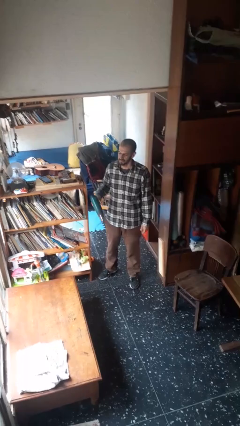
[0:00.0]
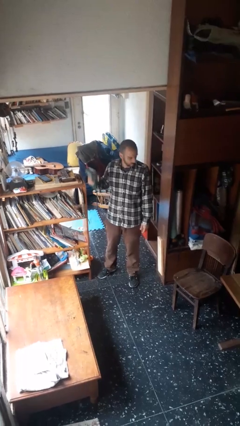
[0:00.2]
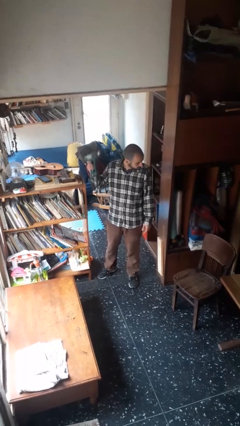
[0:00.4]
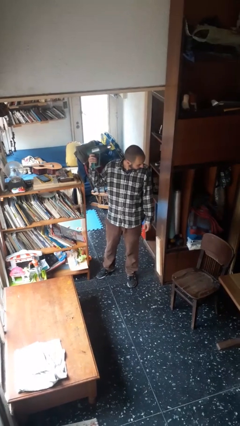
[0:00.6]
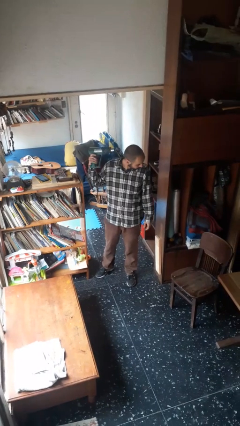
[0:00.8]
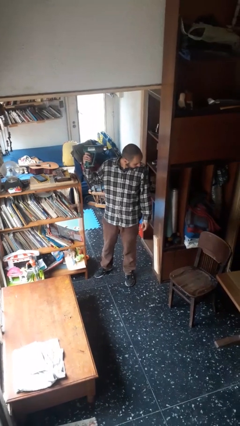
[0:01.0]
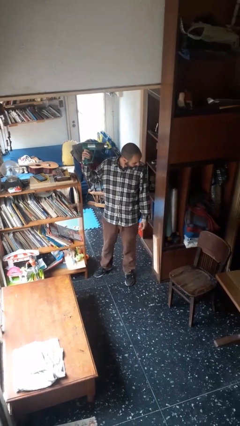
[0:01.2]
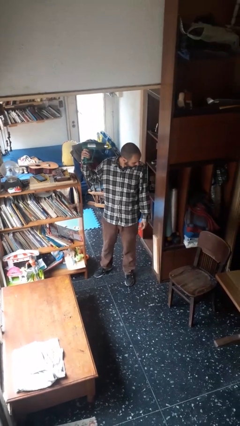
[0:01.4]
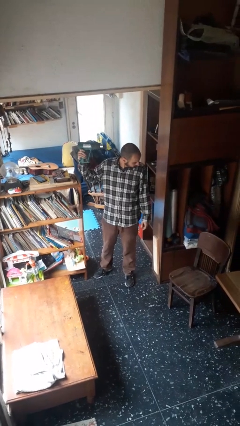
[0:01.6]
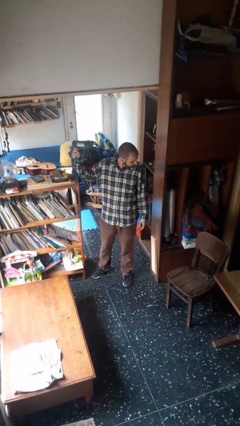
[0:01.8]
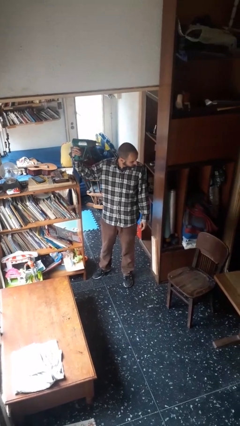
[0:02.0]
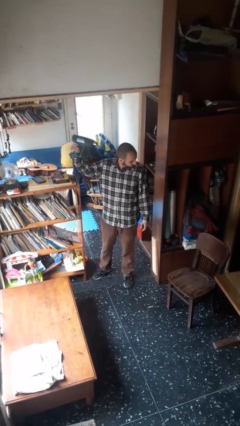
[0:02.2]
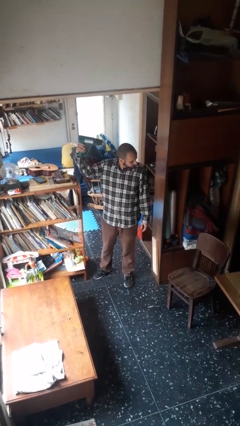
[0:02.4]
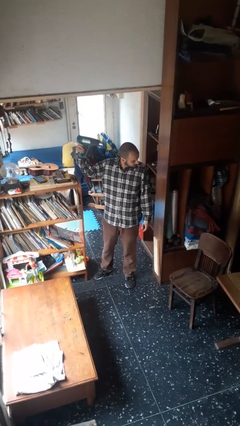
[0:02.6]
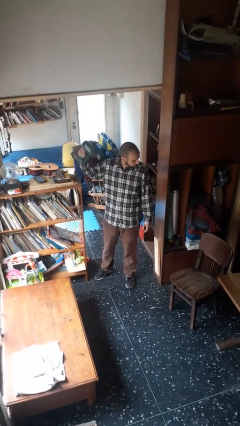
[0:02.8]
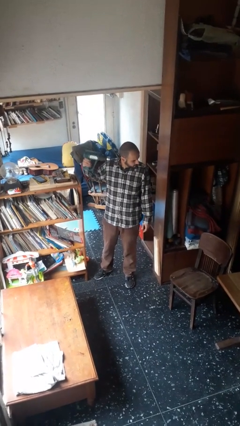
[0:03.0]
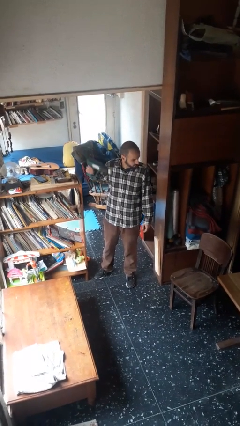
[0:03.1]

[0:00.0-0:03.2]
person dries hair with hairdryer

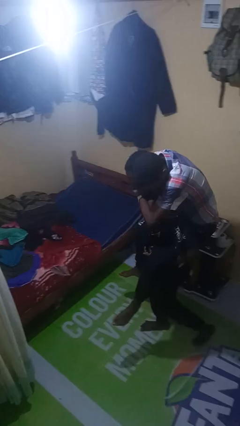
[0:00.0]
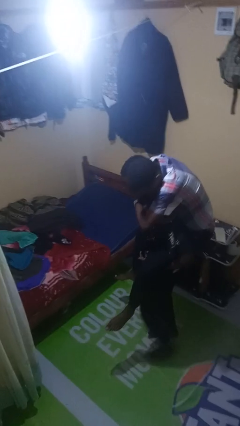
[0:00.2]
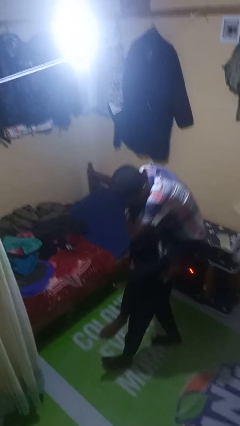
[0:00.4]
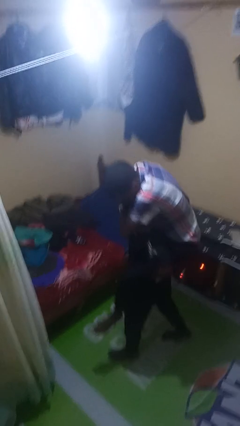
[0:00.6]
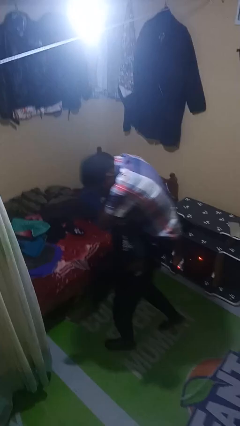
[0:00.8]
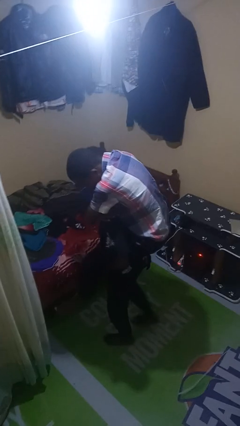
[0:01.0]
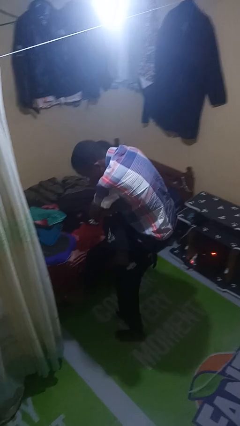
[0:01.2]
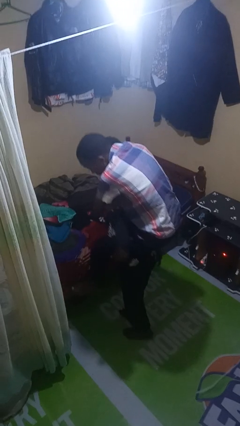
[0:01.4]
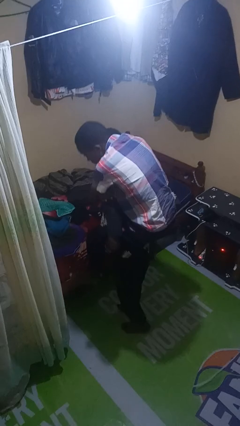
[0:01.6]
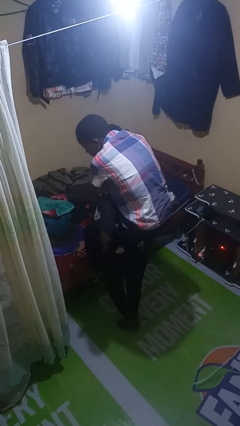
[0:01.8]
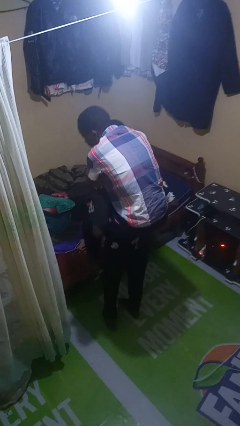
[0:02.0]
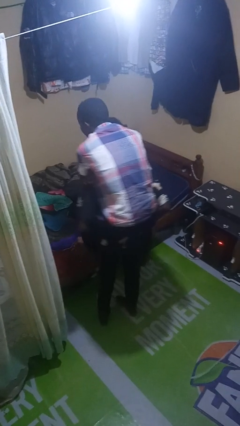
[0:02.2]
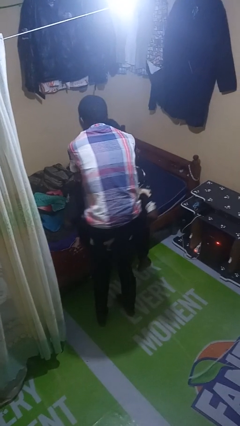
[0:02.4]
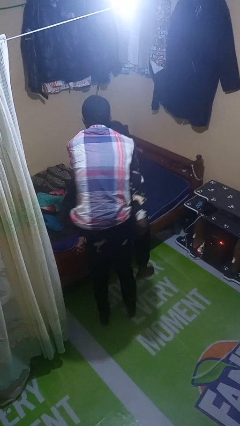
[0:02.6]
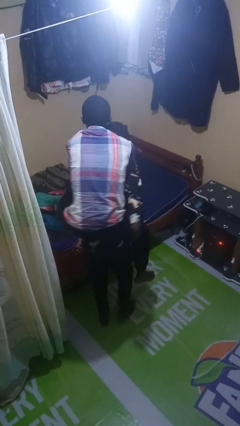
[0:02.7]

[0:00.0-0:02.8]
person carries person on back

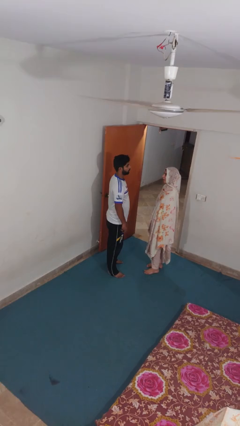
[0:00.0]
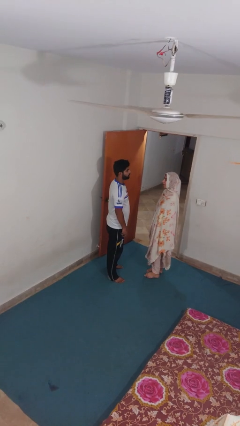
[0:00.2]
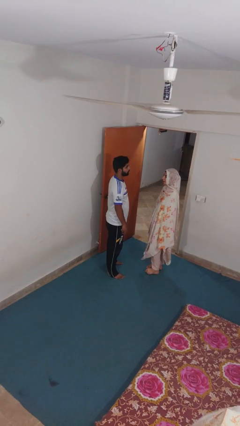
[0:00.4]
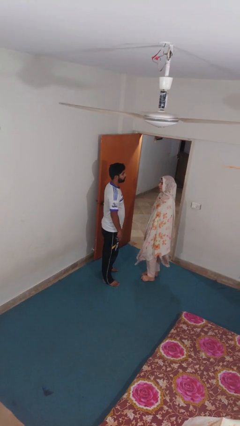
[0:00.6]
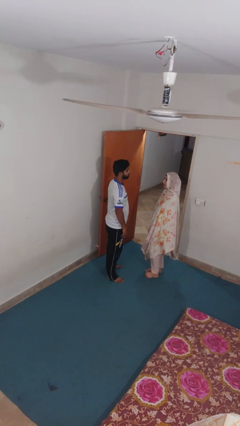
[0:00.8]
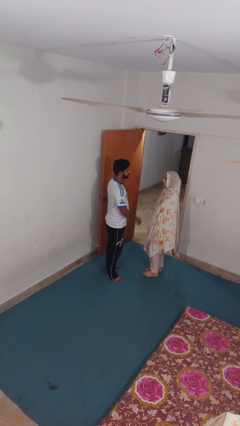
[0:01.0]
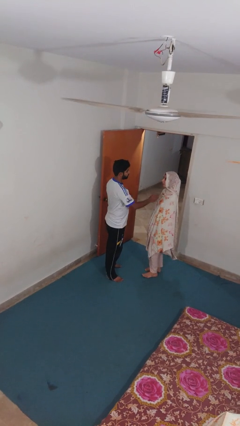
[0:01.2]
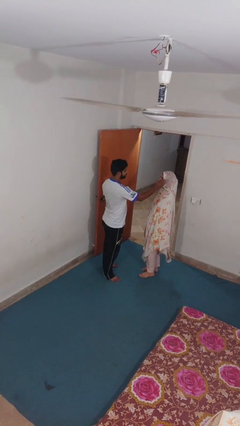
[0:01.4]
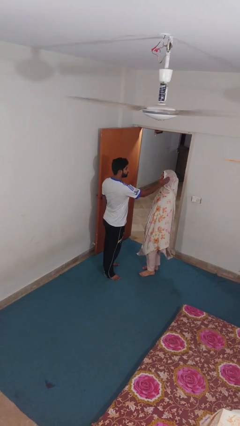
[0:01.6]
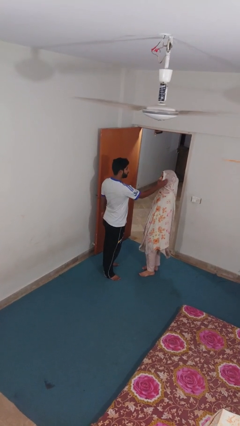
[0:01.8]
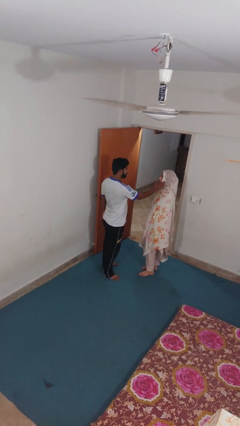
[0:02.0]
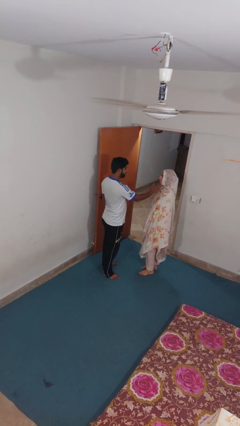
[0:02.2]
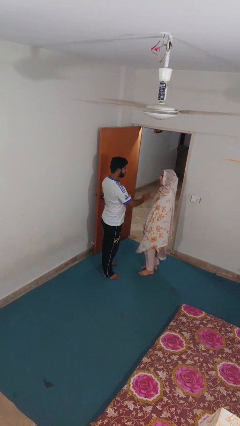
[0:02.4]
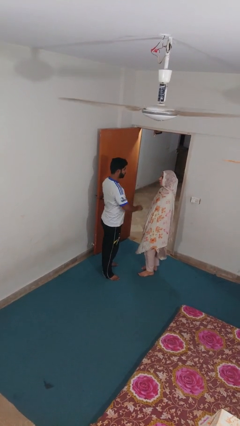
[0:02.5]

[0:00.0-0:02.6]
person touches face of person

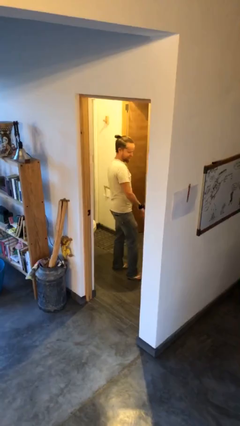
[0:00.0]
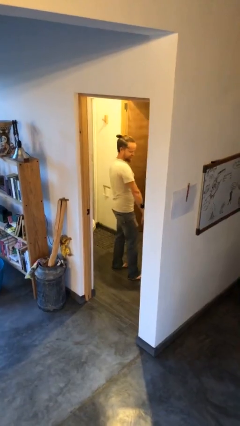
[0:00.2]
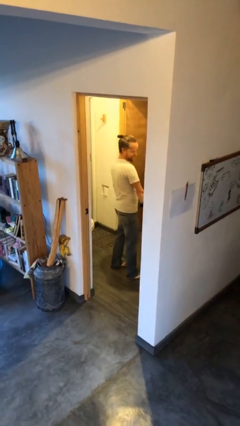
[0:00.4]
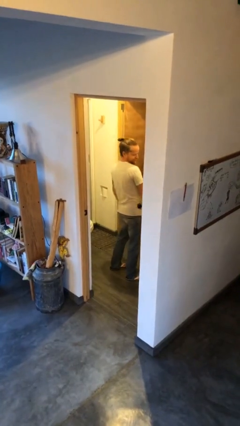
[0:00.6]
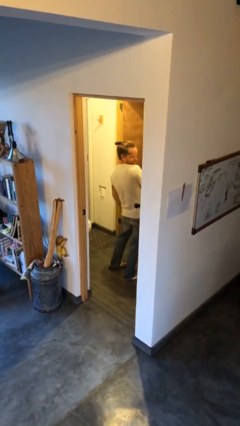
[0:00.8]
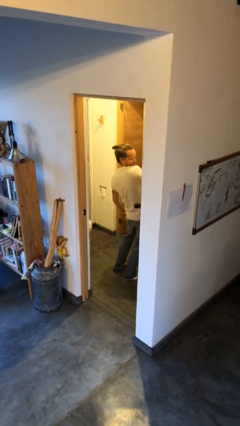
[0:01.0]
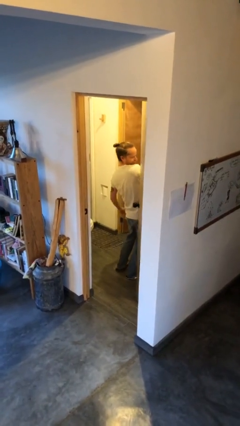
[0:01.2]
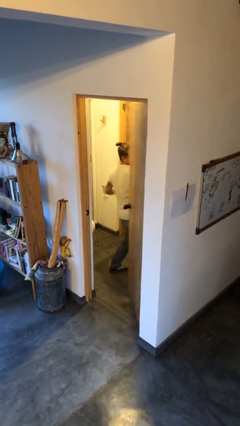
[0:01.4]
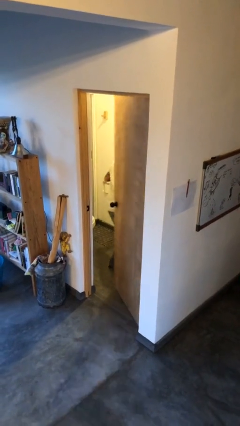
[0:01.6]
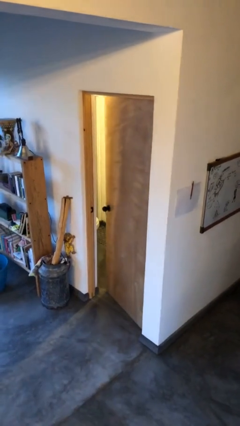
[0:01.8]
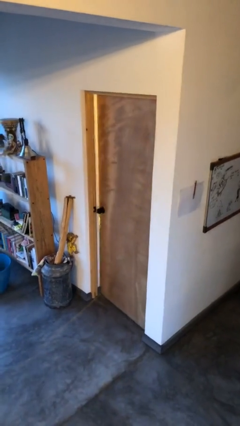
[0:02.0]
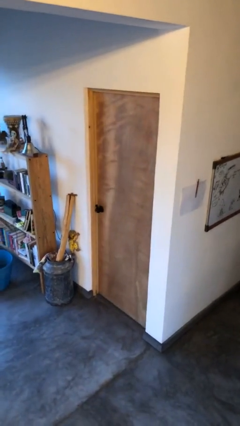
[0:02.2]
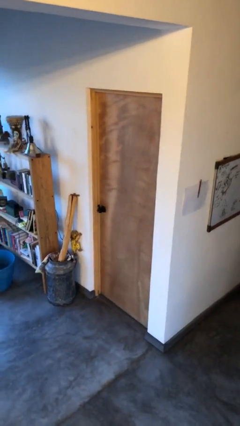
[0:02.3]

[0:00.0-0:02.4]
person closes door with hip

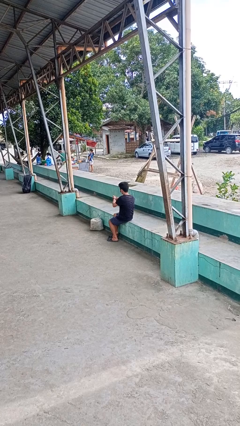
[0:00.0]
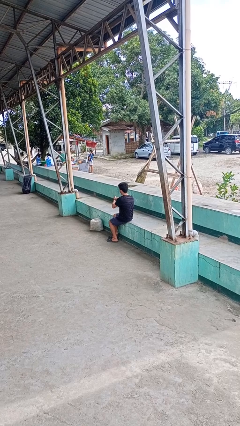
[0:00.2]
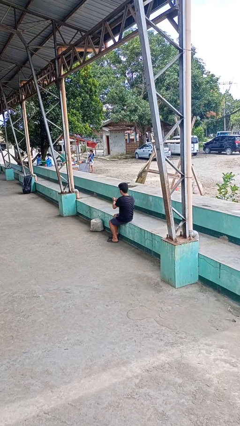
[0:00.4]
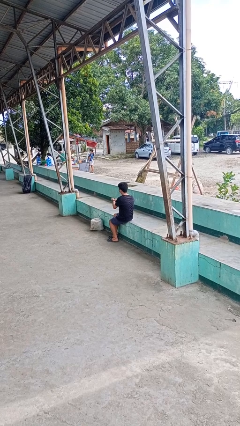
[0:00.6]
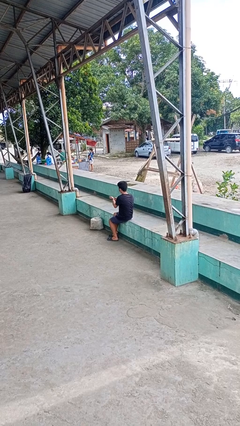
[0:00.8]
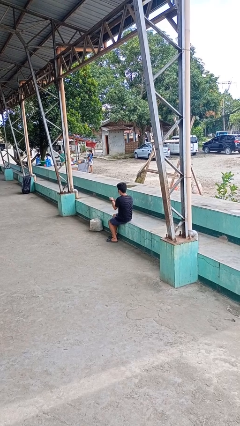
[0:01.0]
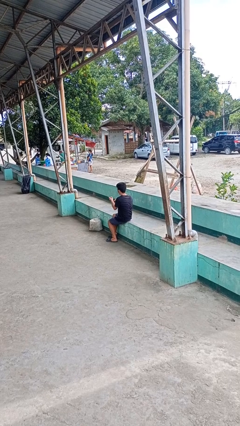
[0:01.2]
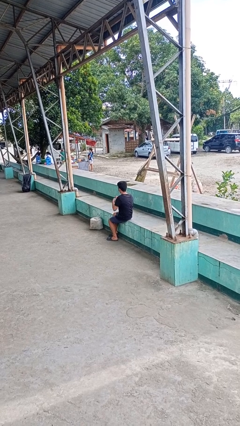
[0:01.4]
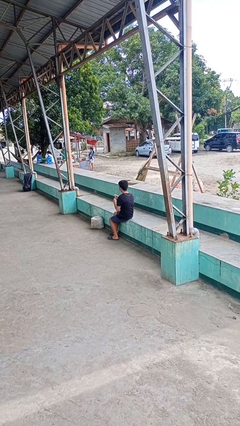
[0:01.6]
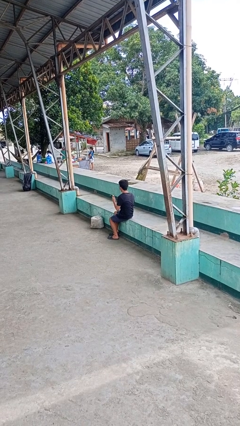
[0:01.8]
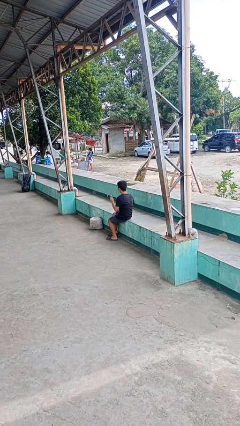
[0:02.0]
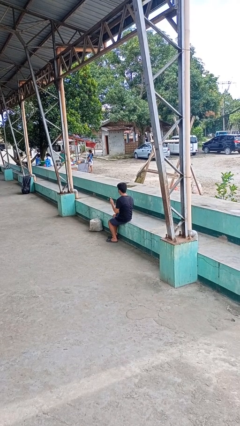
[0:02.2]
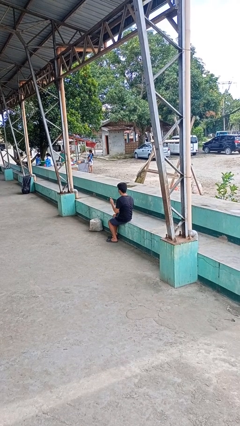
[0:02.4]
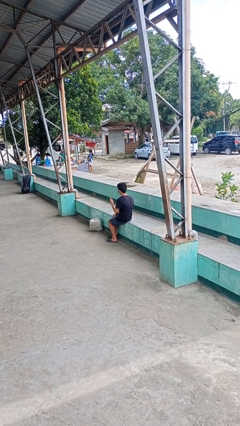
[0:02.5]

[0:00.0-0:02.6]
person takes off wristwatch

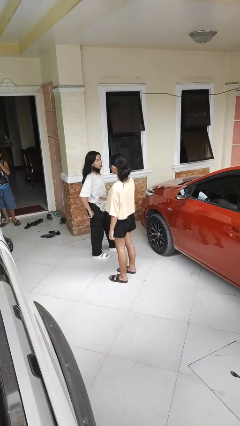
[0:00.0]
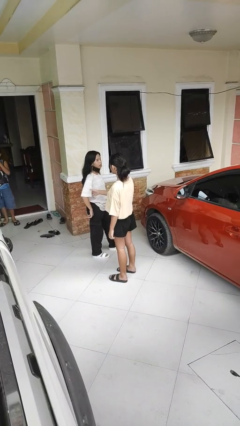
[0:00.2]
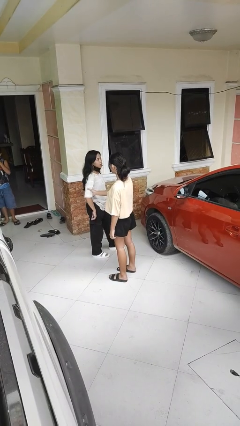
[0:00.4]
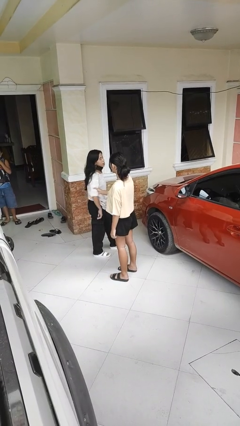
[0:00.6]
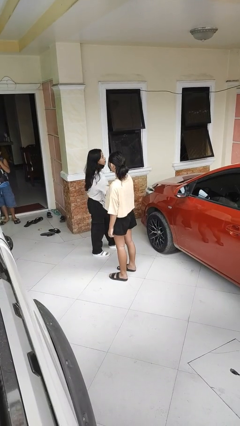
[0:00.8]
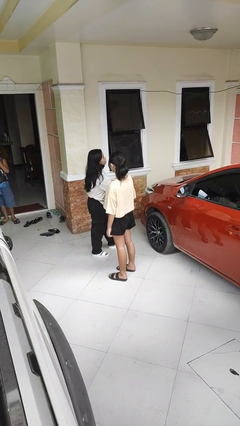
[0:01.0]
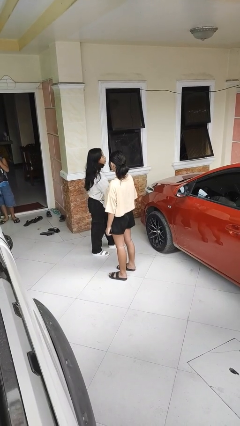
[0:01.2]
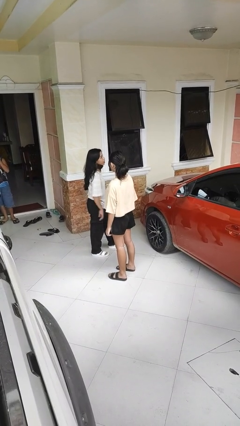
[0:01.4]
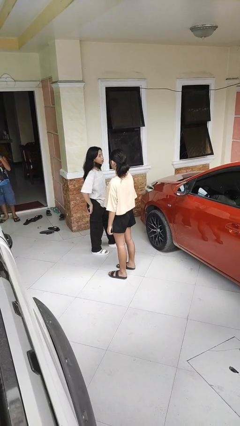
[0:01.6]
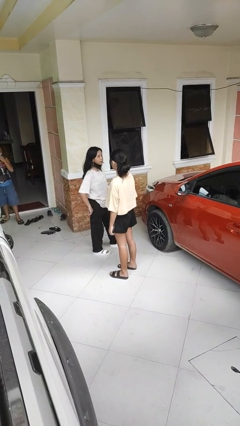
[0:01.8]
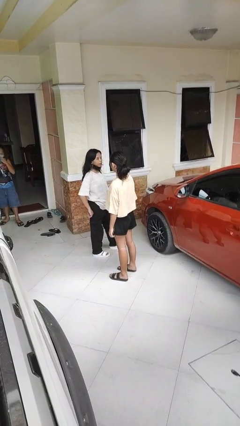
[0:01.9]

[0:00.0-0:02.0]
person grabs person by bicep

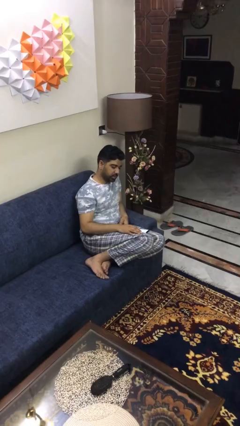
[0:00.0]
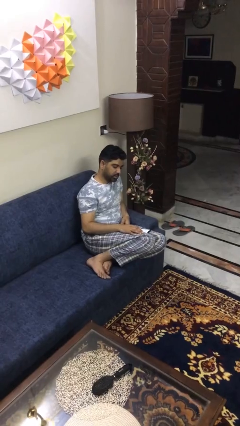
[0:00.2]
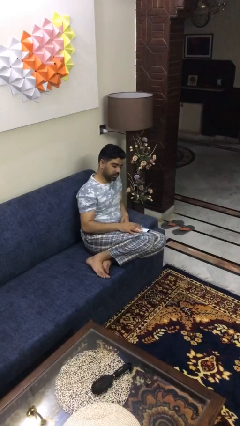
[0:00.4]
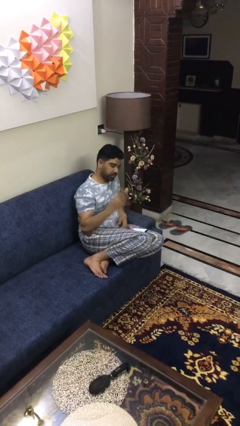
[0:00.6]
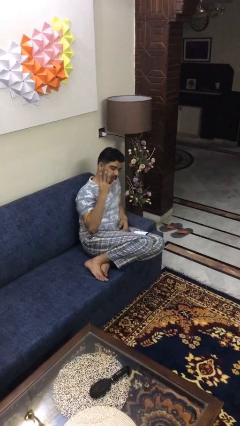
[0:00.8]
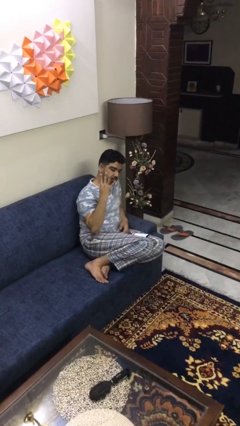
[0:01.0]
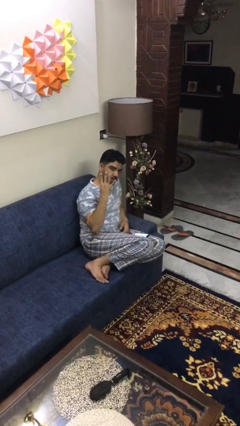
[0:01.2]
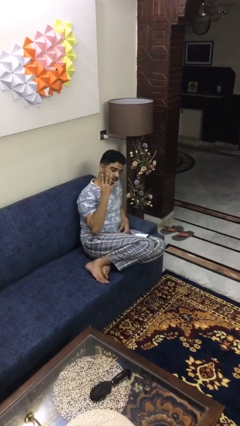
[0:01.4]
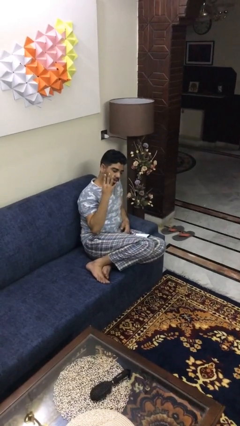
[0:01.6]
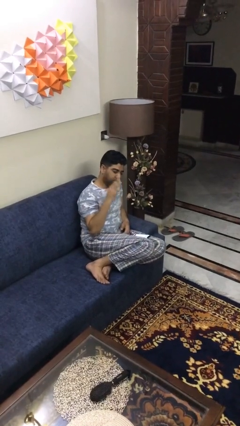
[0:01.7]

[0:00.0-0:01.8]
person gestures number four
